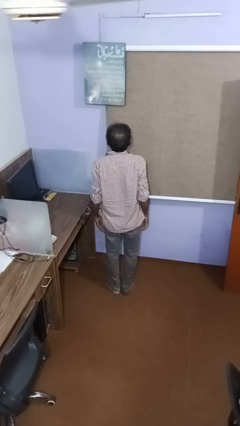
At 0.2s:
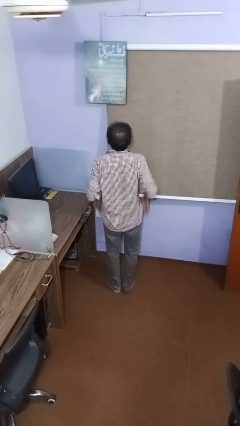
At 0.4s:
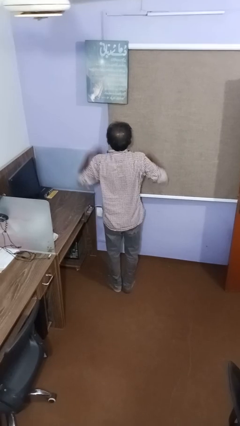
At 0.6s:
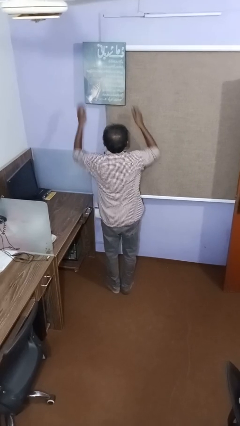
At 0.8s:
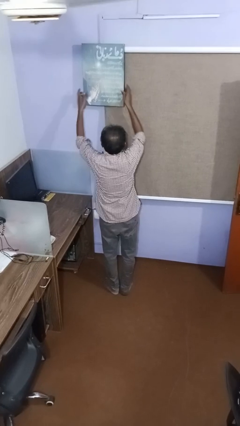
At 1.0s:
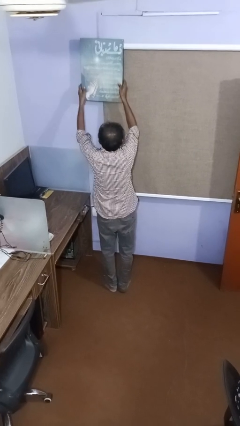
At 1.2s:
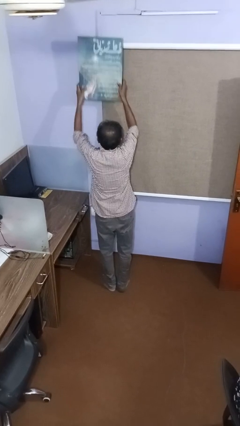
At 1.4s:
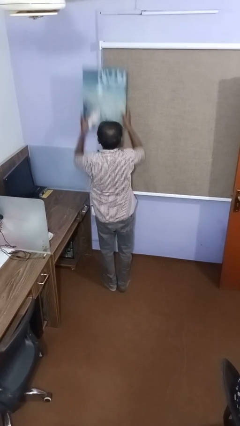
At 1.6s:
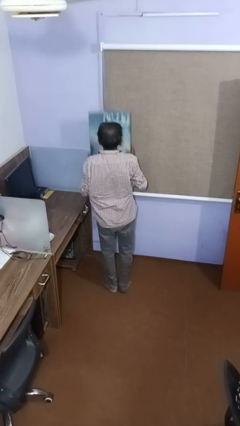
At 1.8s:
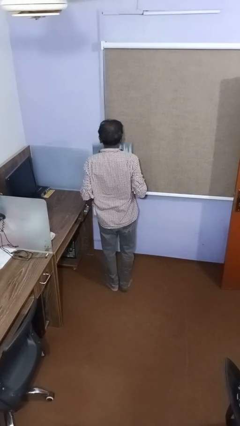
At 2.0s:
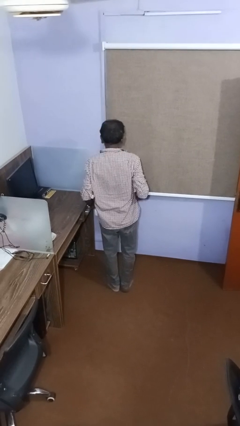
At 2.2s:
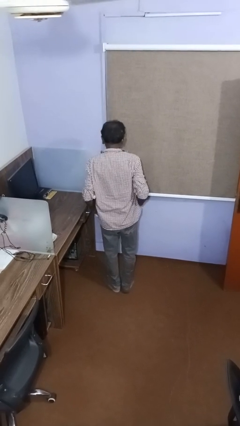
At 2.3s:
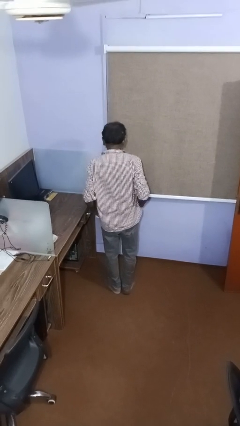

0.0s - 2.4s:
person takes down picture frame

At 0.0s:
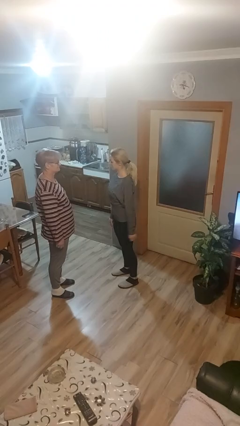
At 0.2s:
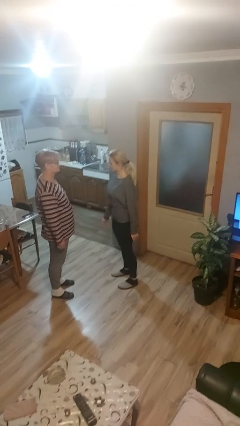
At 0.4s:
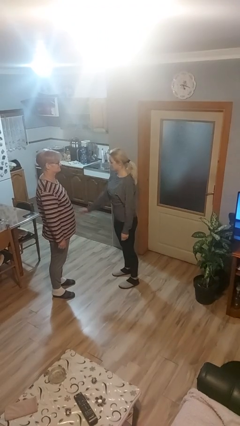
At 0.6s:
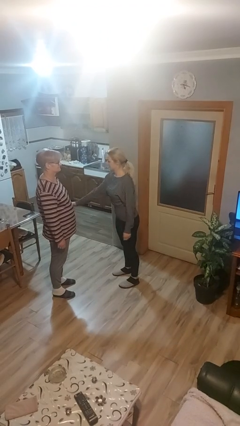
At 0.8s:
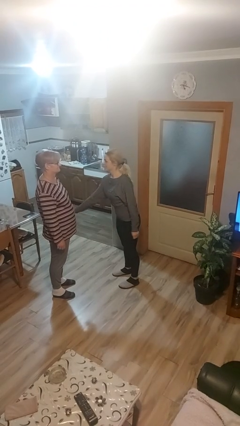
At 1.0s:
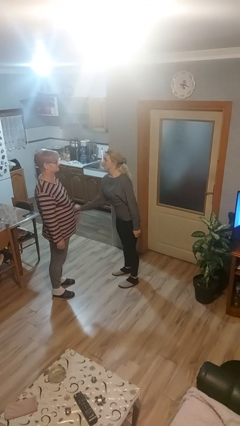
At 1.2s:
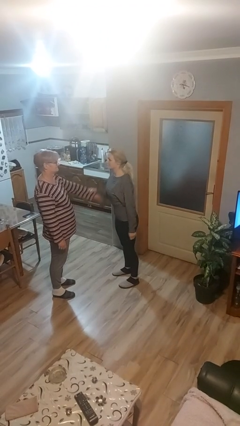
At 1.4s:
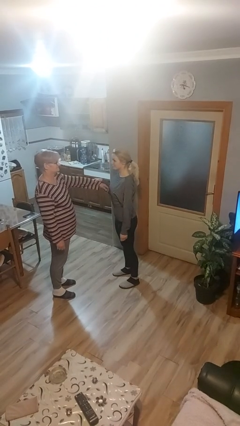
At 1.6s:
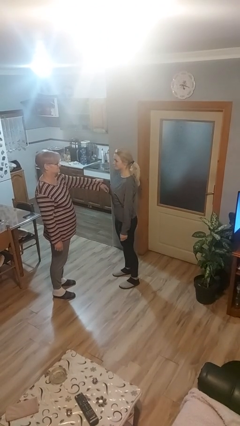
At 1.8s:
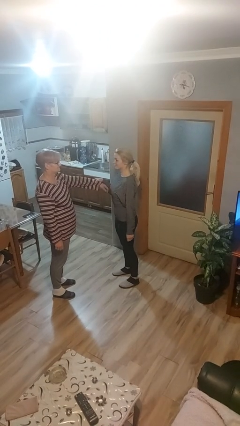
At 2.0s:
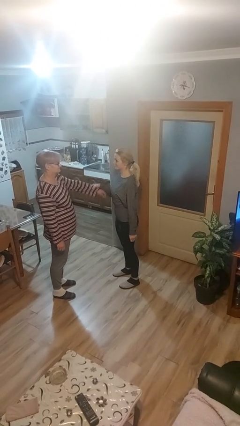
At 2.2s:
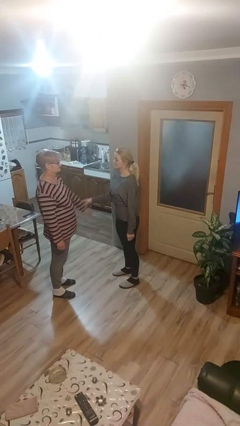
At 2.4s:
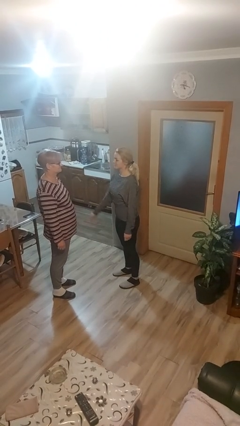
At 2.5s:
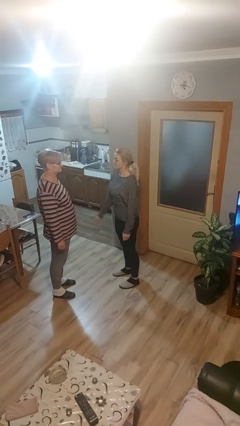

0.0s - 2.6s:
person grabs person by forearm

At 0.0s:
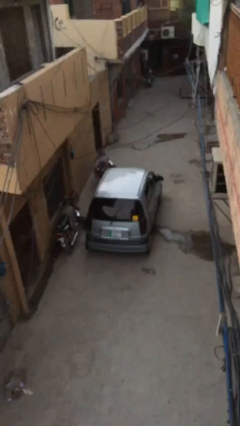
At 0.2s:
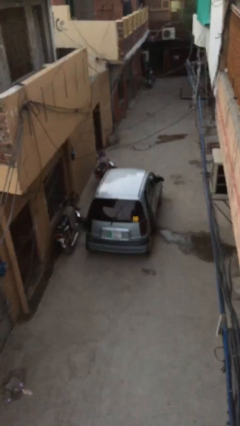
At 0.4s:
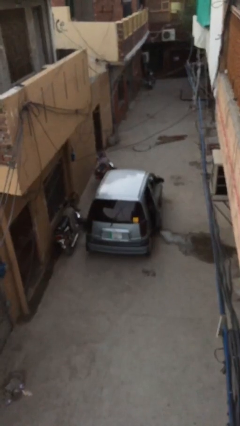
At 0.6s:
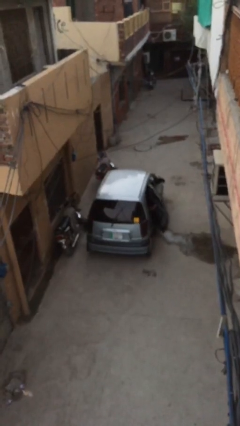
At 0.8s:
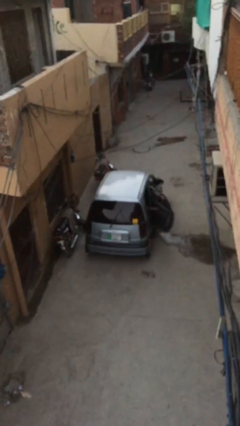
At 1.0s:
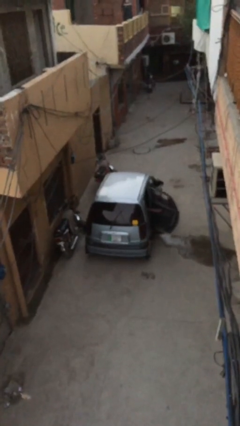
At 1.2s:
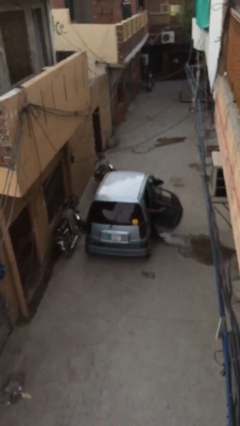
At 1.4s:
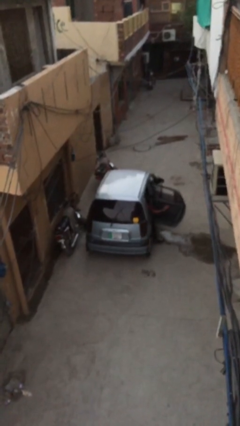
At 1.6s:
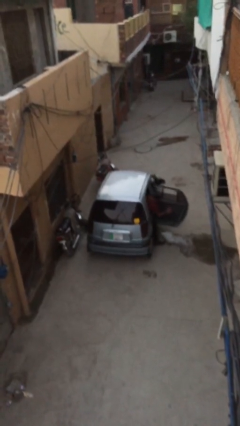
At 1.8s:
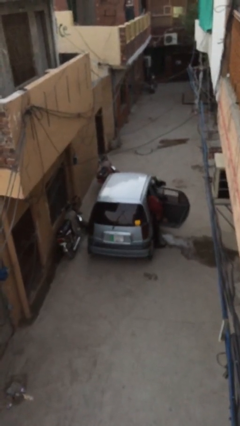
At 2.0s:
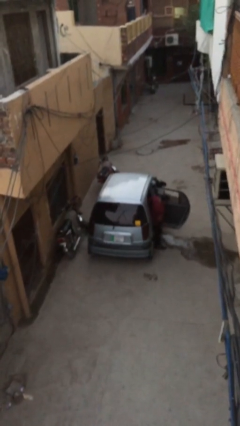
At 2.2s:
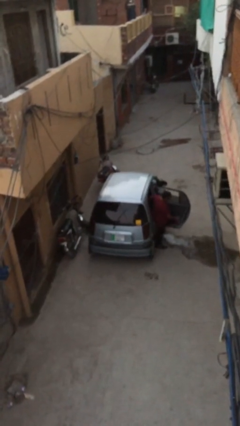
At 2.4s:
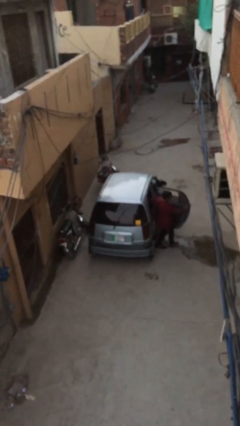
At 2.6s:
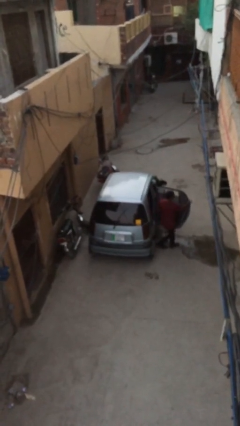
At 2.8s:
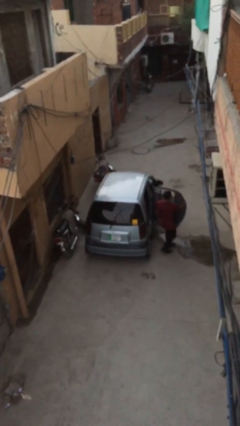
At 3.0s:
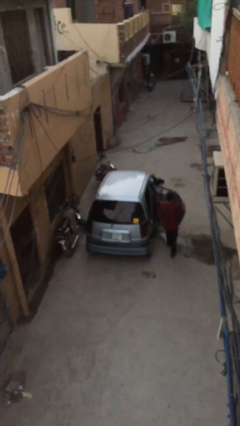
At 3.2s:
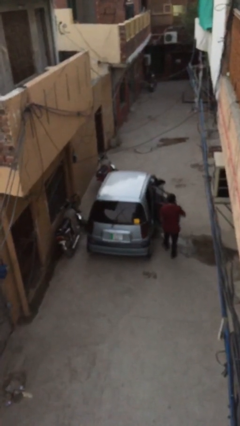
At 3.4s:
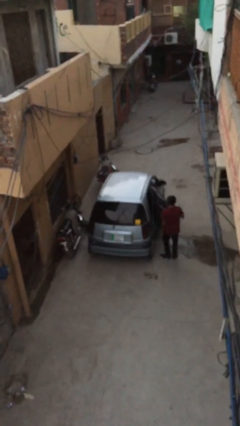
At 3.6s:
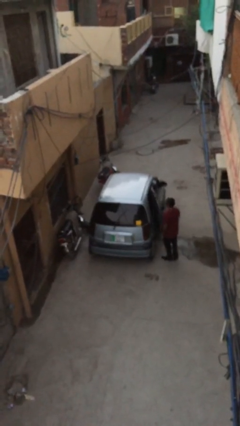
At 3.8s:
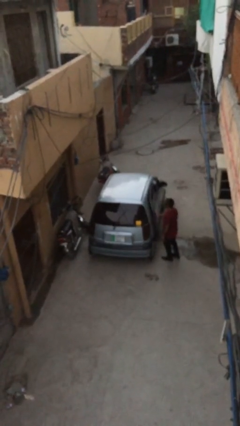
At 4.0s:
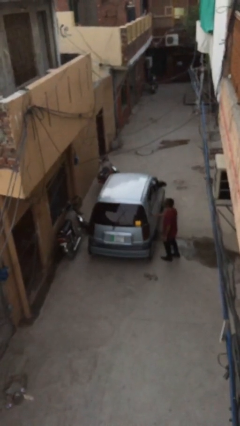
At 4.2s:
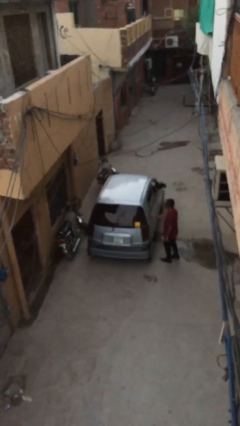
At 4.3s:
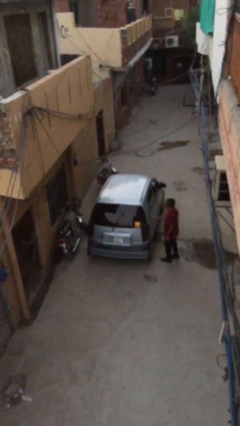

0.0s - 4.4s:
car drops off person

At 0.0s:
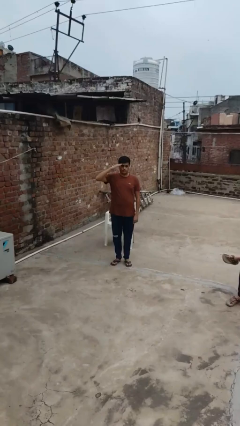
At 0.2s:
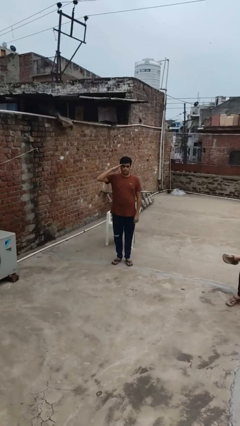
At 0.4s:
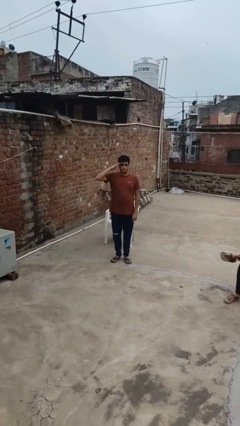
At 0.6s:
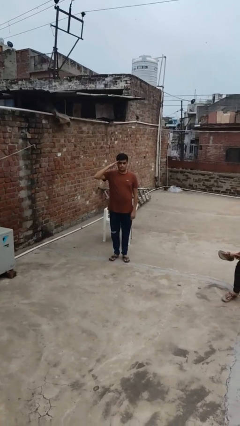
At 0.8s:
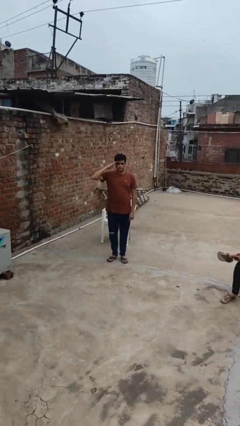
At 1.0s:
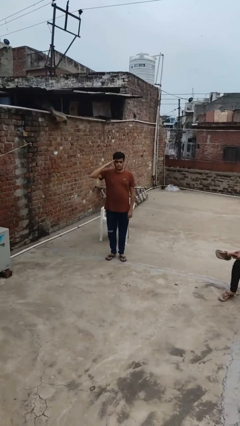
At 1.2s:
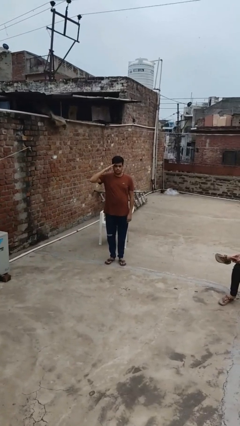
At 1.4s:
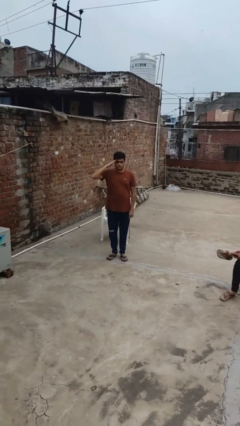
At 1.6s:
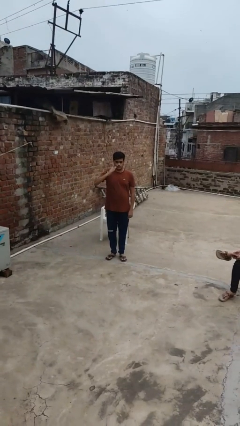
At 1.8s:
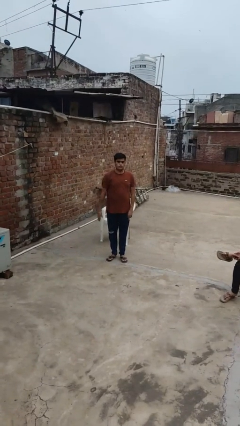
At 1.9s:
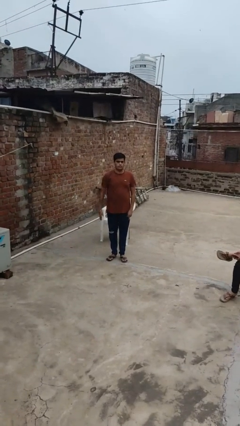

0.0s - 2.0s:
person salutes

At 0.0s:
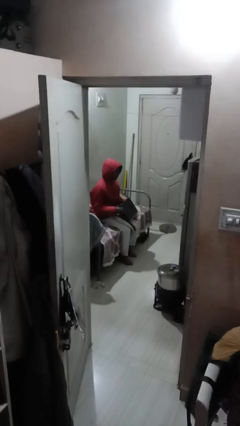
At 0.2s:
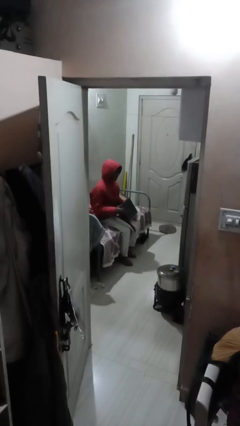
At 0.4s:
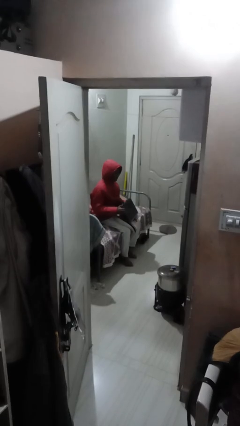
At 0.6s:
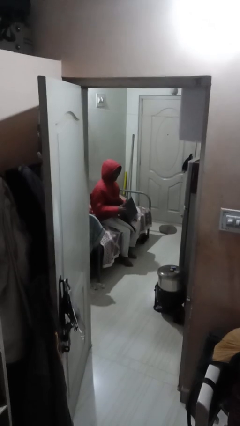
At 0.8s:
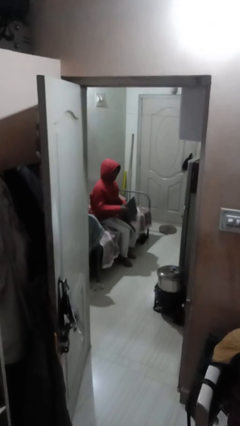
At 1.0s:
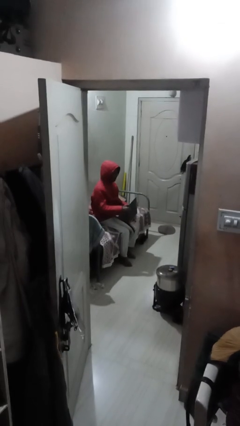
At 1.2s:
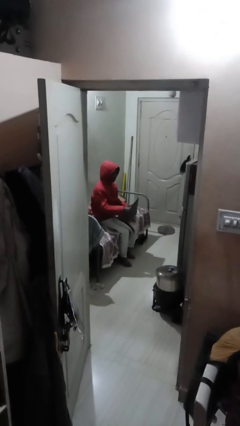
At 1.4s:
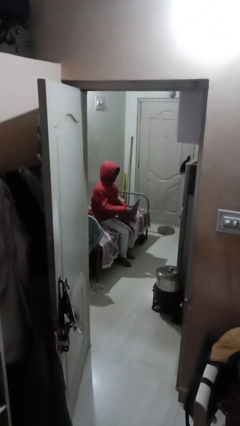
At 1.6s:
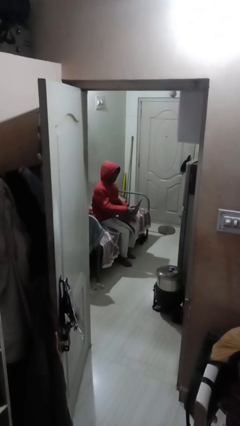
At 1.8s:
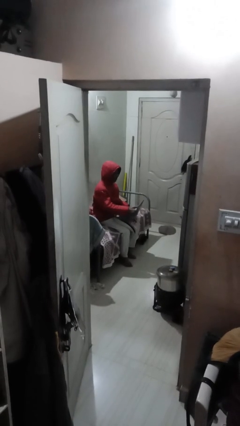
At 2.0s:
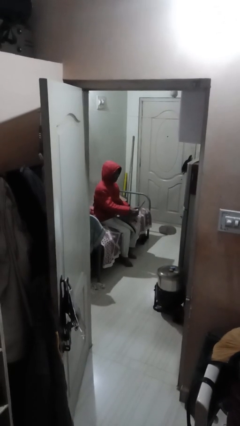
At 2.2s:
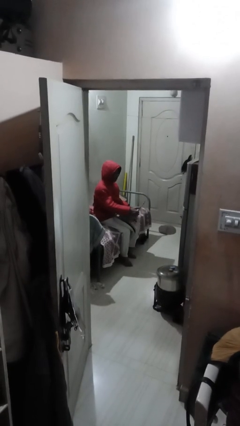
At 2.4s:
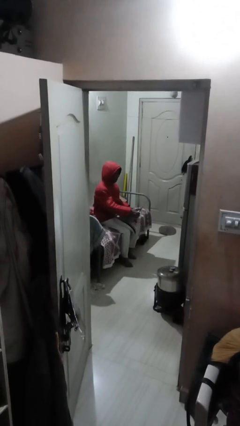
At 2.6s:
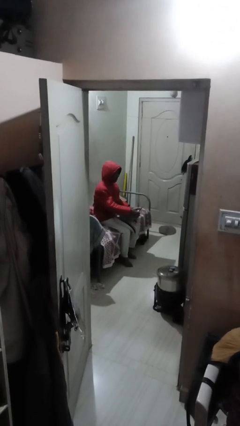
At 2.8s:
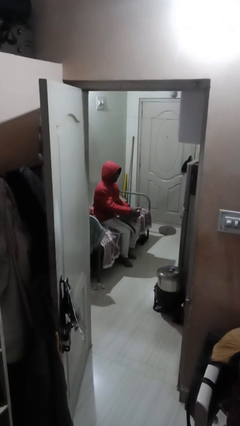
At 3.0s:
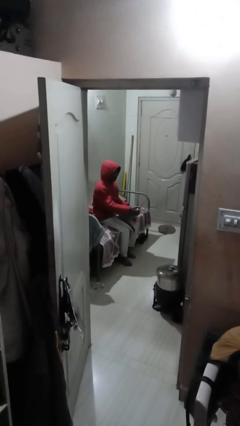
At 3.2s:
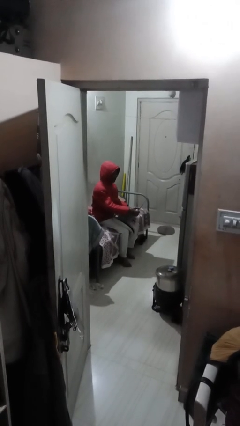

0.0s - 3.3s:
person interacts with laptop

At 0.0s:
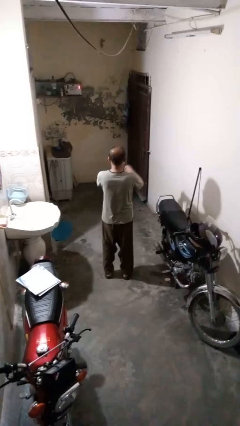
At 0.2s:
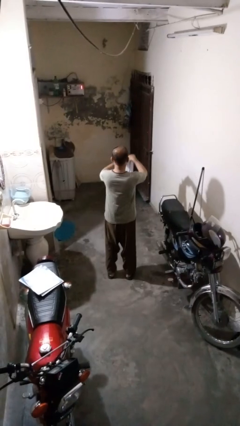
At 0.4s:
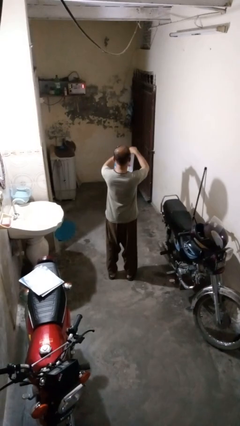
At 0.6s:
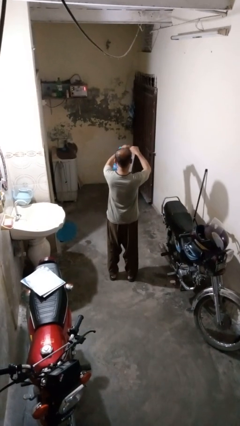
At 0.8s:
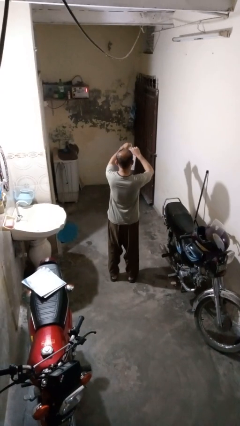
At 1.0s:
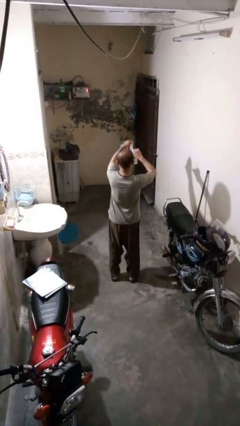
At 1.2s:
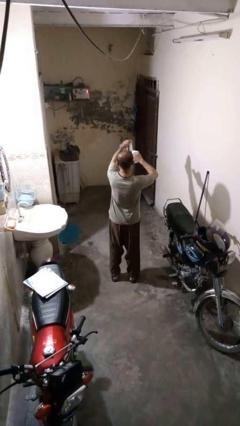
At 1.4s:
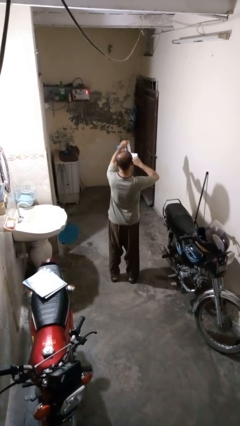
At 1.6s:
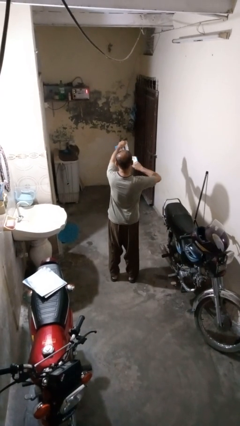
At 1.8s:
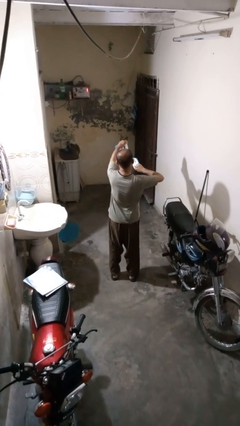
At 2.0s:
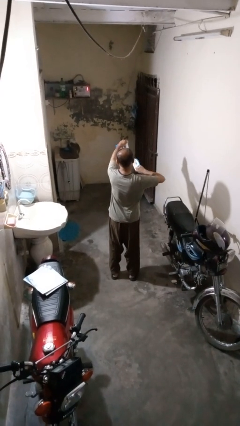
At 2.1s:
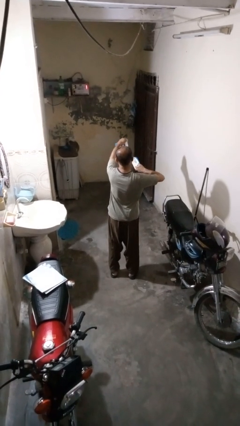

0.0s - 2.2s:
person tears paper

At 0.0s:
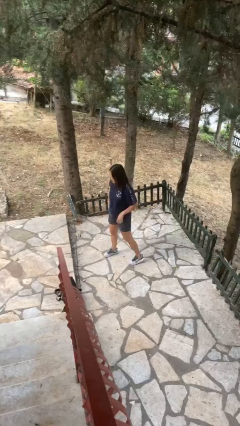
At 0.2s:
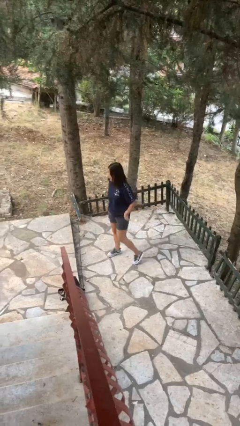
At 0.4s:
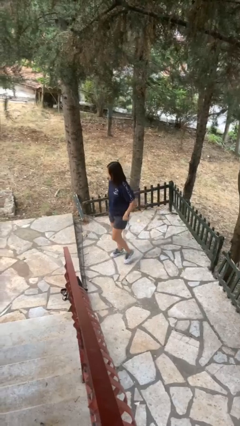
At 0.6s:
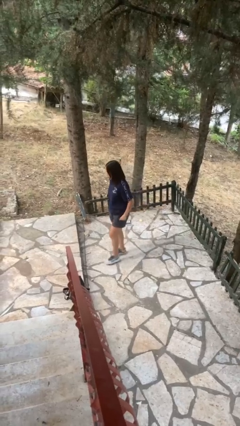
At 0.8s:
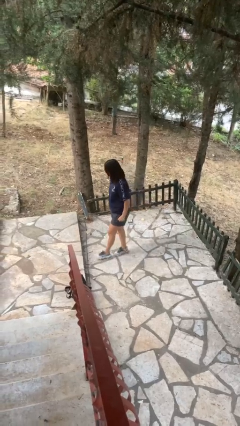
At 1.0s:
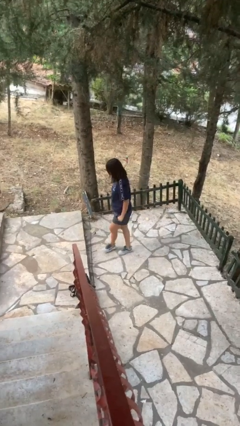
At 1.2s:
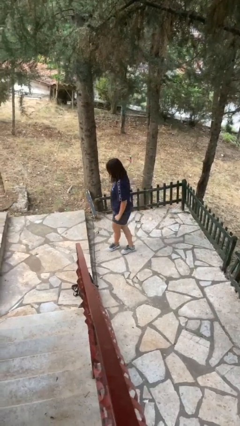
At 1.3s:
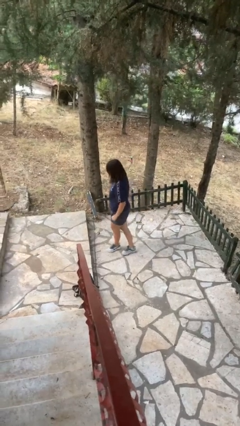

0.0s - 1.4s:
person puts phone into pocket
